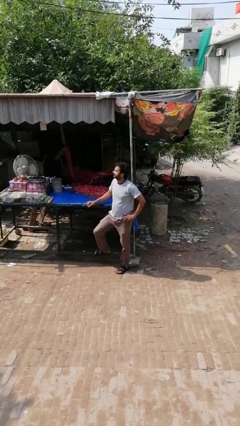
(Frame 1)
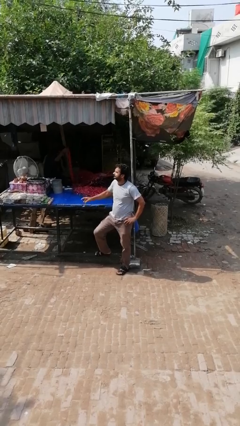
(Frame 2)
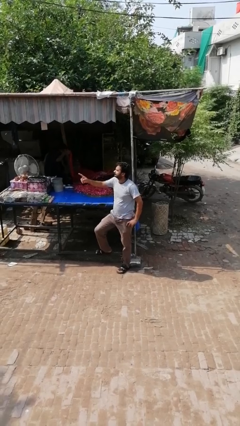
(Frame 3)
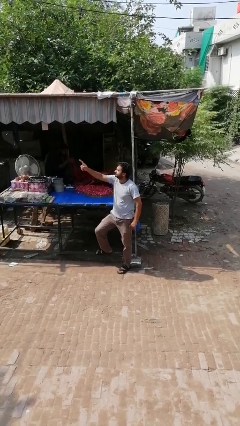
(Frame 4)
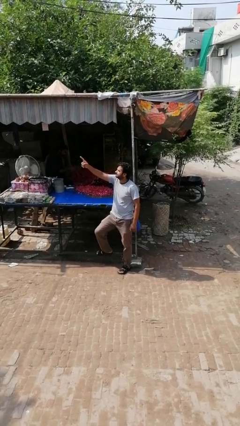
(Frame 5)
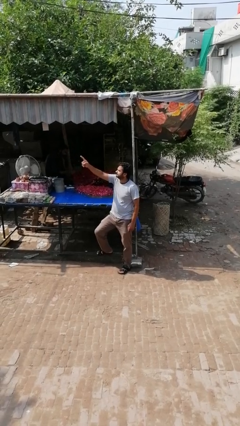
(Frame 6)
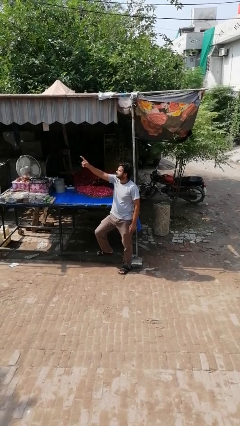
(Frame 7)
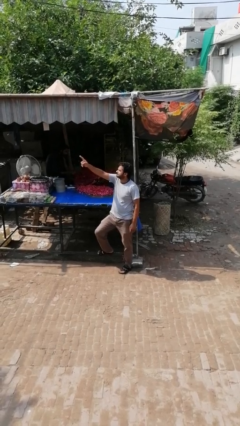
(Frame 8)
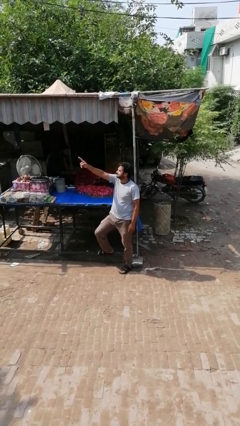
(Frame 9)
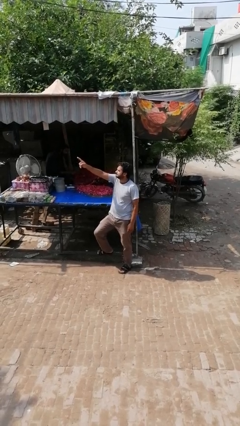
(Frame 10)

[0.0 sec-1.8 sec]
person points at person

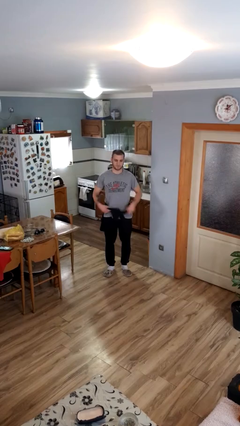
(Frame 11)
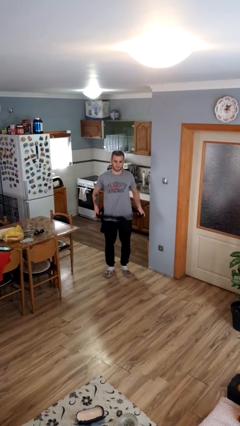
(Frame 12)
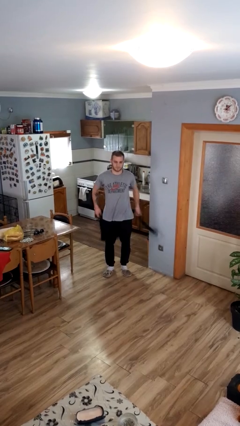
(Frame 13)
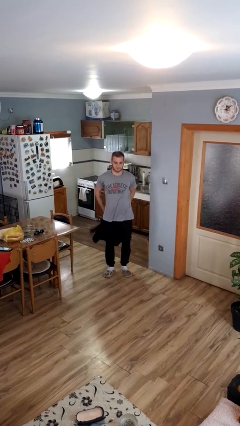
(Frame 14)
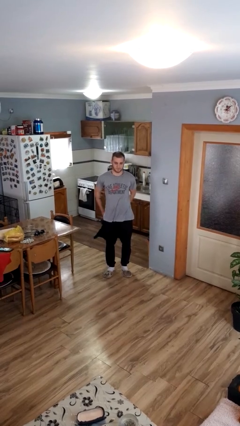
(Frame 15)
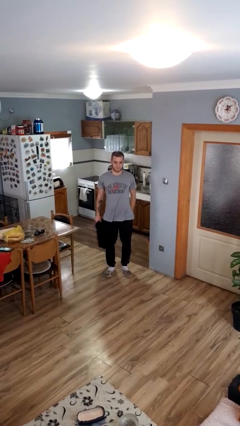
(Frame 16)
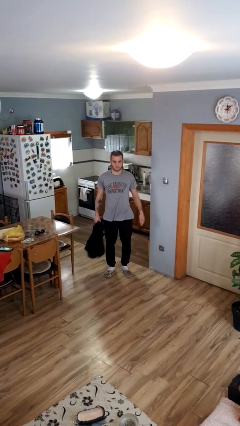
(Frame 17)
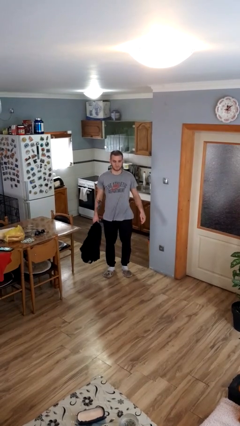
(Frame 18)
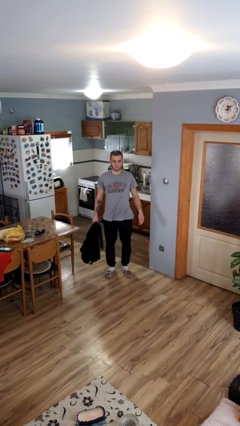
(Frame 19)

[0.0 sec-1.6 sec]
person unties jacket around waist

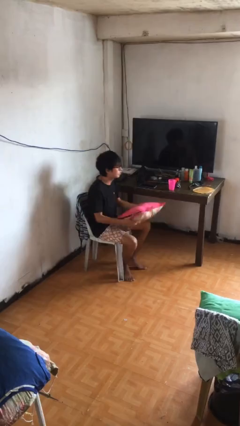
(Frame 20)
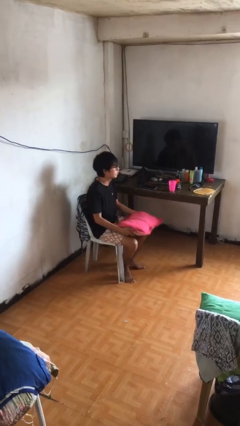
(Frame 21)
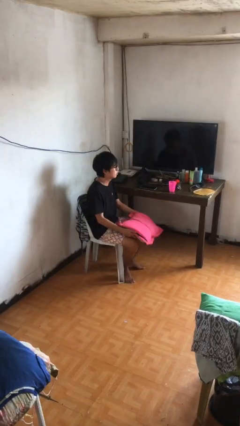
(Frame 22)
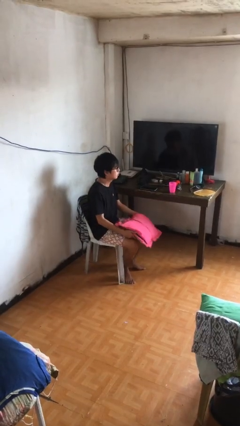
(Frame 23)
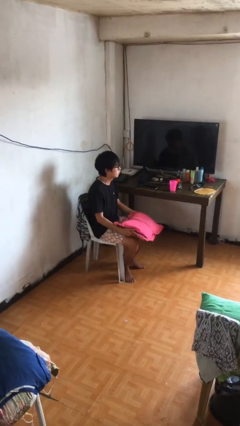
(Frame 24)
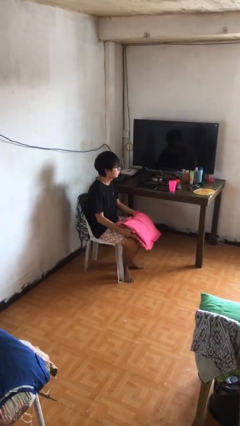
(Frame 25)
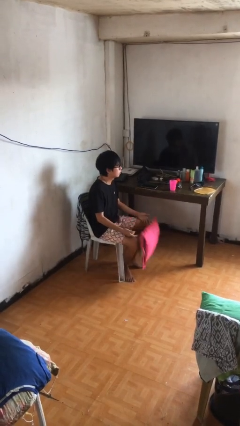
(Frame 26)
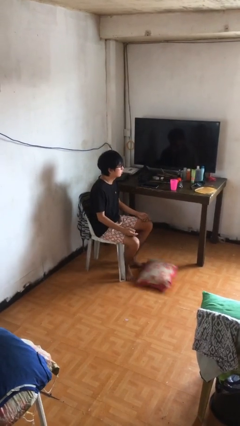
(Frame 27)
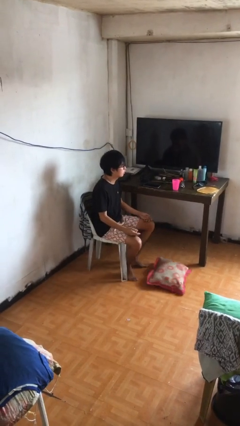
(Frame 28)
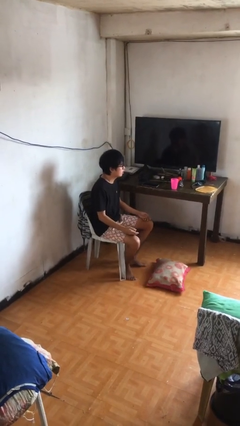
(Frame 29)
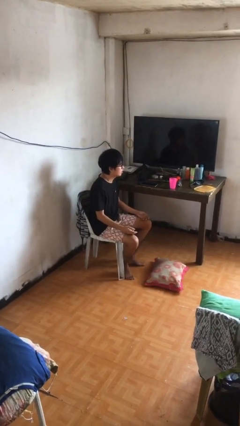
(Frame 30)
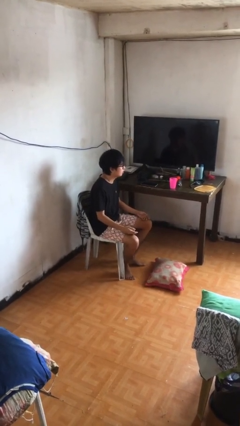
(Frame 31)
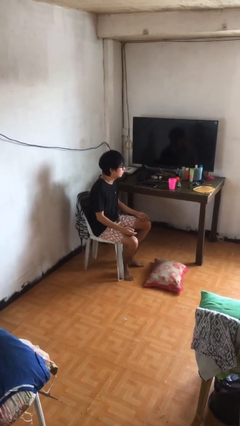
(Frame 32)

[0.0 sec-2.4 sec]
person drops object

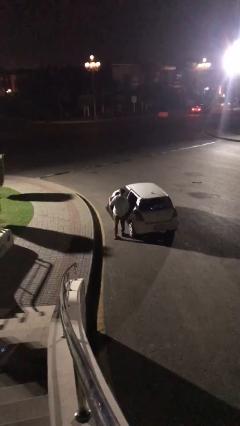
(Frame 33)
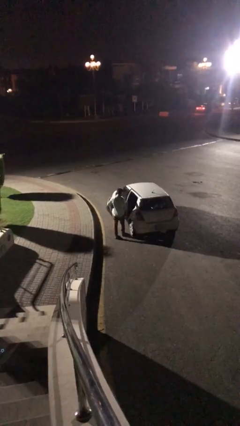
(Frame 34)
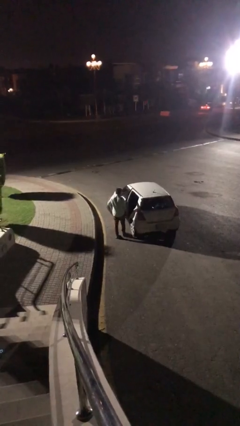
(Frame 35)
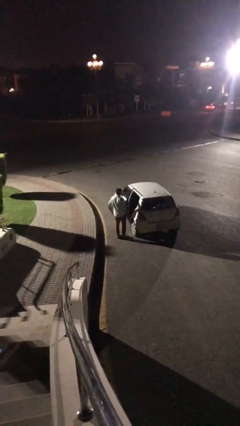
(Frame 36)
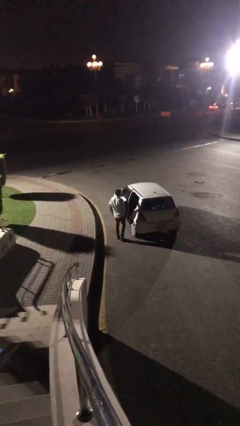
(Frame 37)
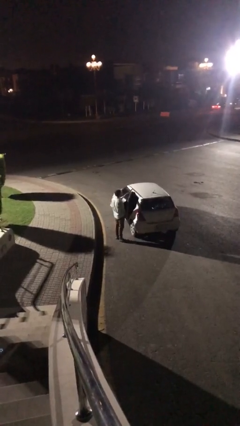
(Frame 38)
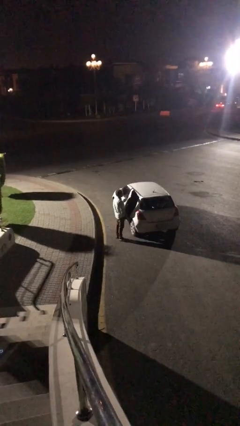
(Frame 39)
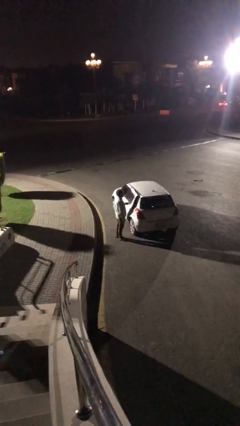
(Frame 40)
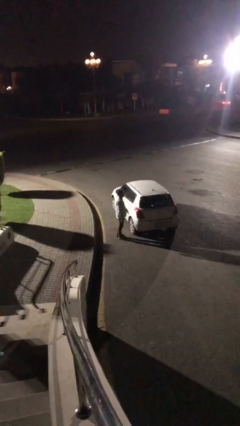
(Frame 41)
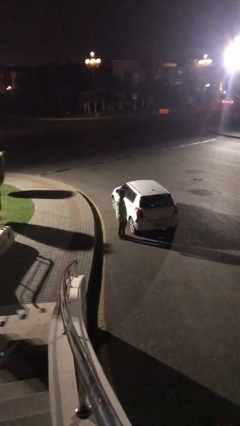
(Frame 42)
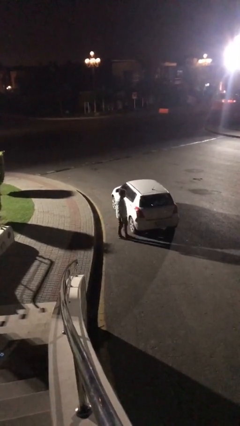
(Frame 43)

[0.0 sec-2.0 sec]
person closes car door

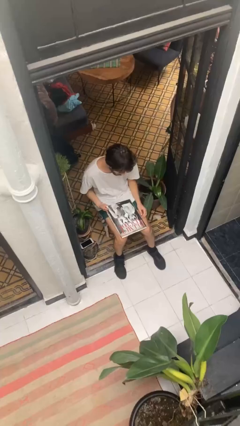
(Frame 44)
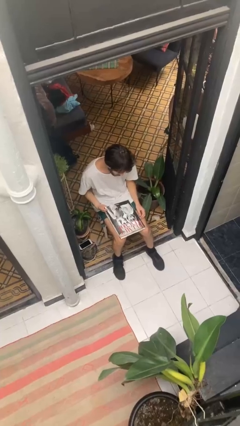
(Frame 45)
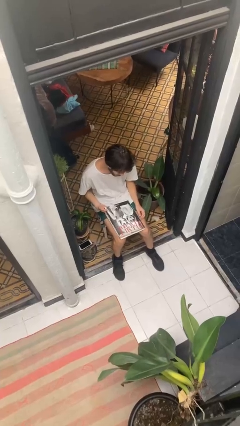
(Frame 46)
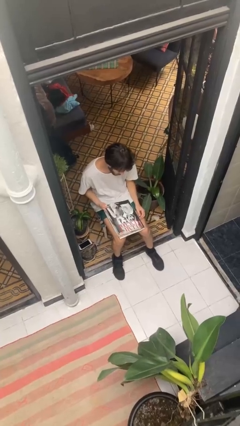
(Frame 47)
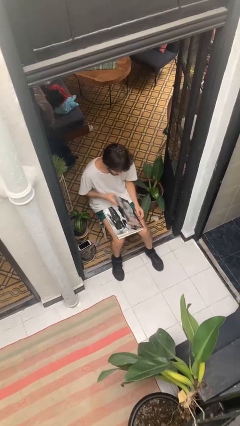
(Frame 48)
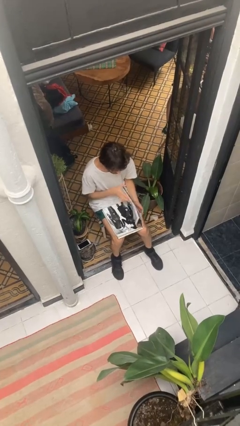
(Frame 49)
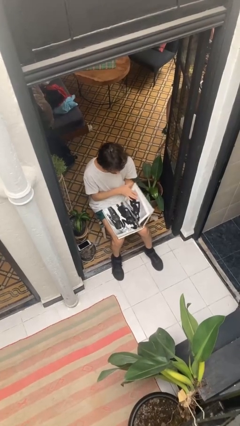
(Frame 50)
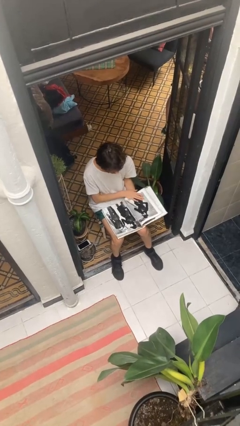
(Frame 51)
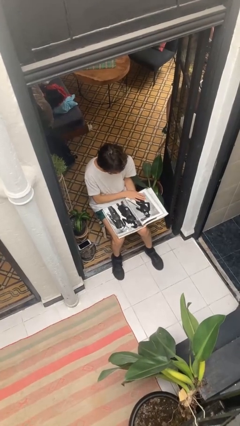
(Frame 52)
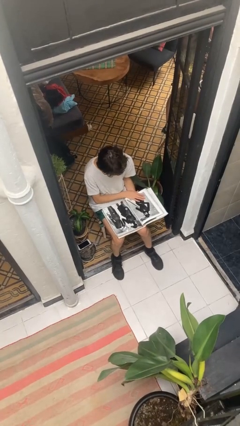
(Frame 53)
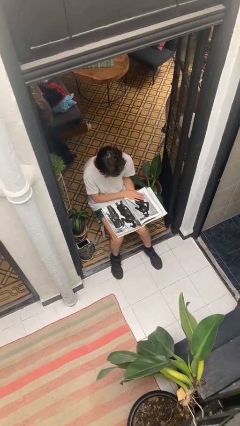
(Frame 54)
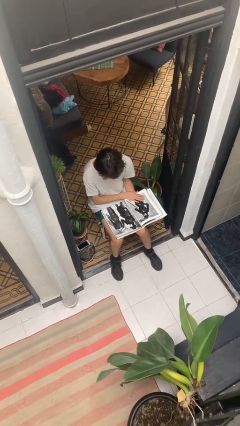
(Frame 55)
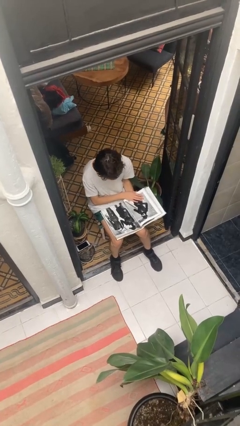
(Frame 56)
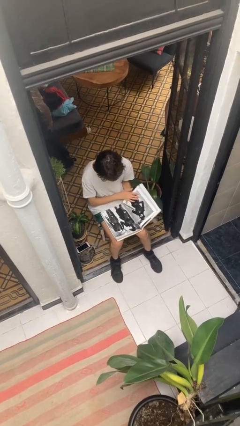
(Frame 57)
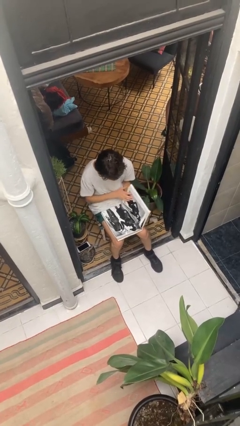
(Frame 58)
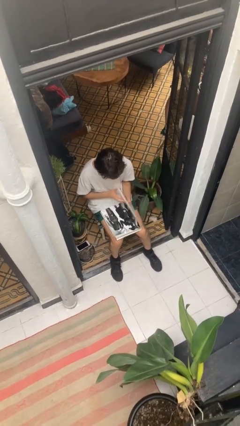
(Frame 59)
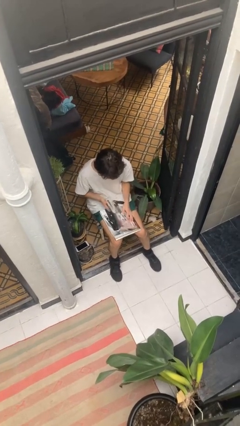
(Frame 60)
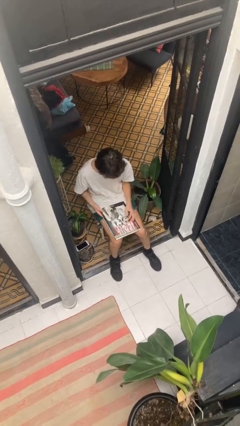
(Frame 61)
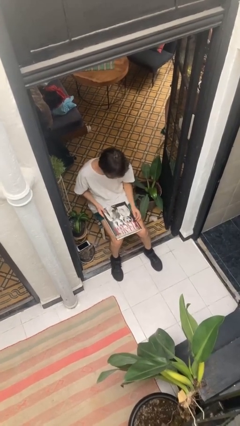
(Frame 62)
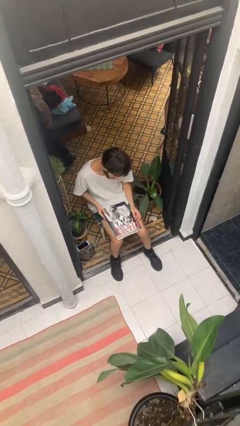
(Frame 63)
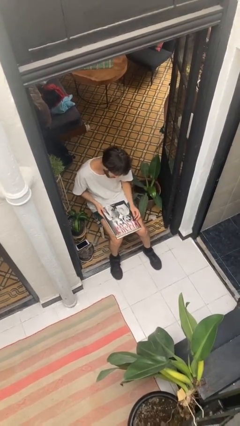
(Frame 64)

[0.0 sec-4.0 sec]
person reads document

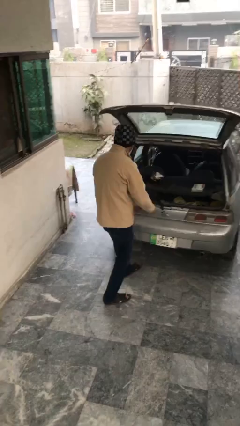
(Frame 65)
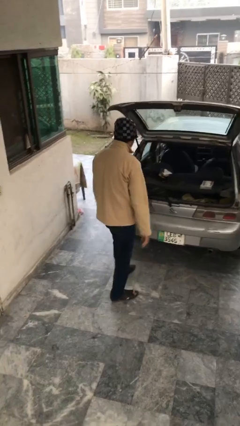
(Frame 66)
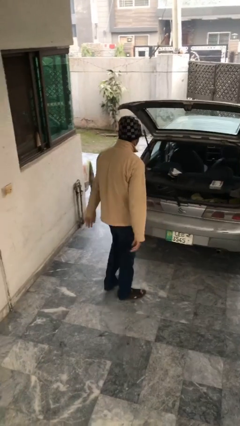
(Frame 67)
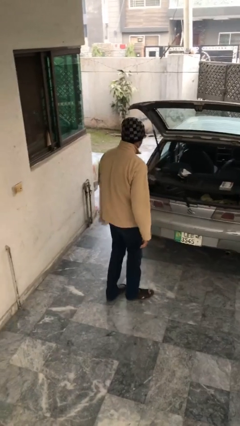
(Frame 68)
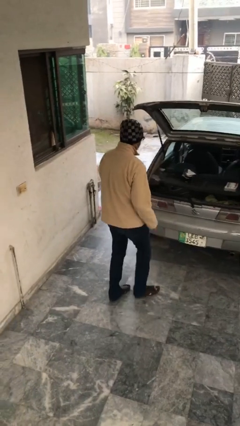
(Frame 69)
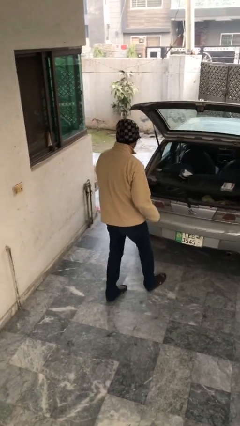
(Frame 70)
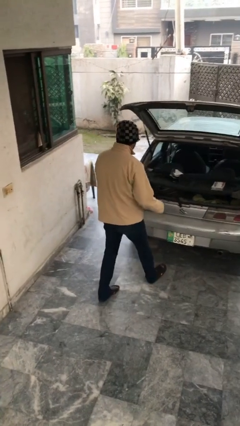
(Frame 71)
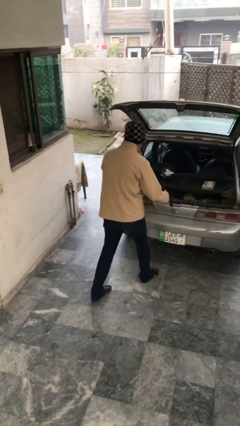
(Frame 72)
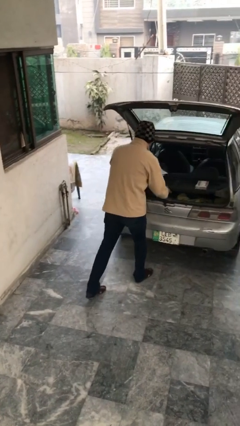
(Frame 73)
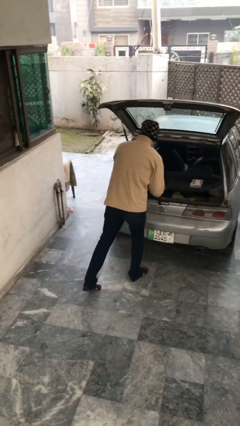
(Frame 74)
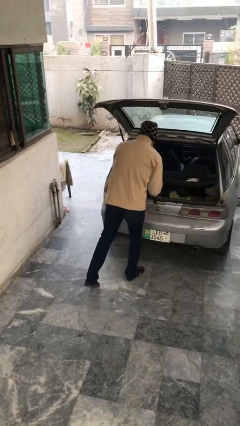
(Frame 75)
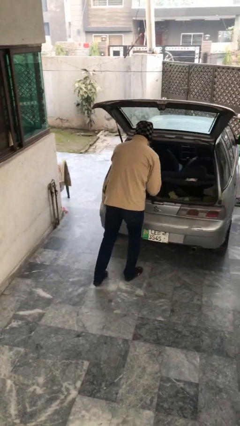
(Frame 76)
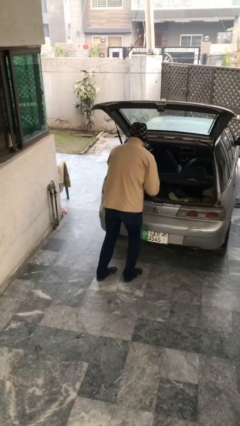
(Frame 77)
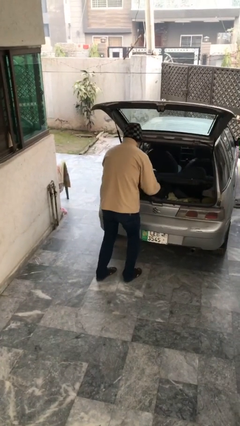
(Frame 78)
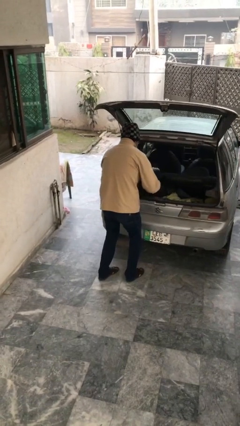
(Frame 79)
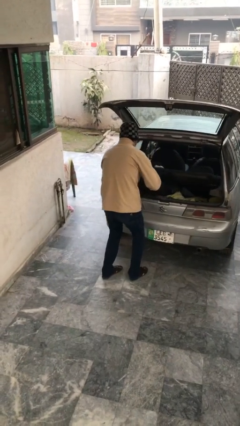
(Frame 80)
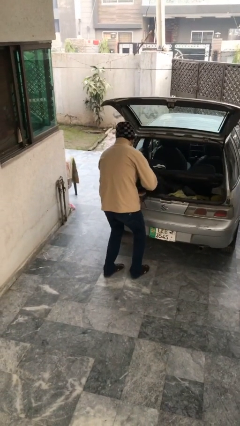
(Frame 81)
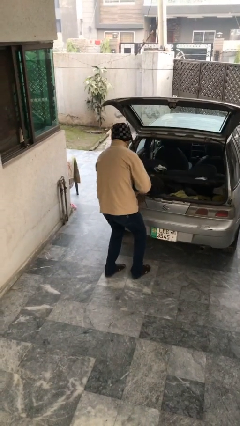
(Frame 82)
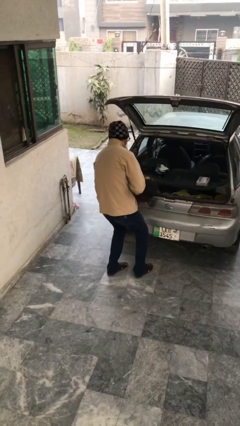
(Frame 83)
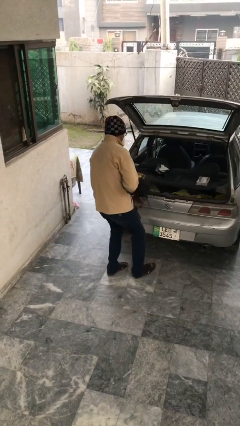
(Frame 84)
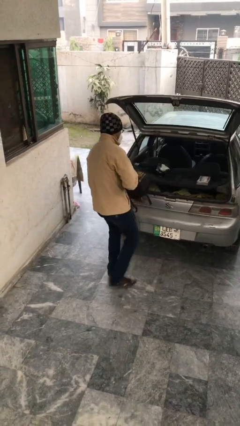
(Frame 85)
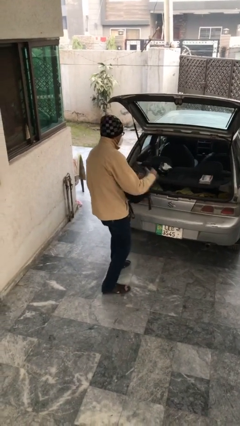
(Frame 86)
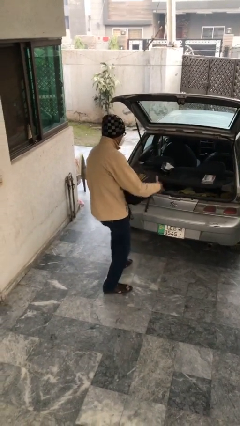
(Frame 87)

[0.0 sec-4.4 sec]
person unloads car

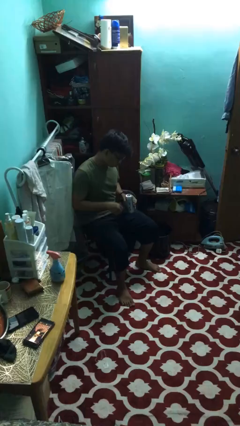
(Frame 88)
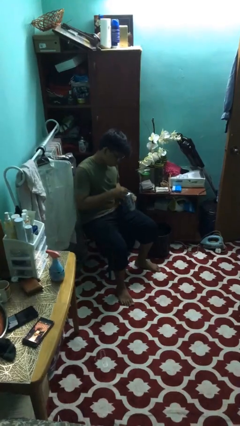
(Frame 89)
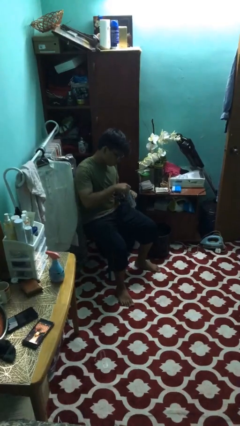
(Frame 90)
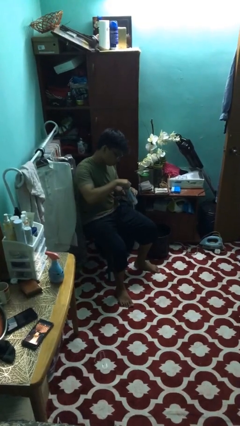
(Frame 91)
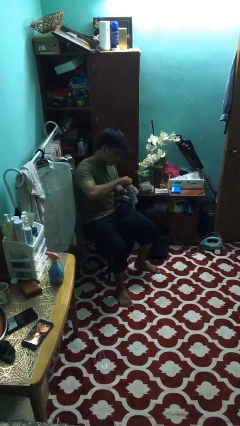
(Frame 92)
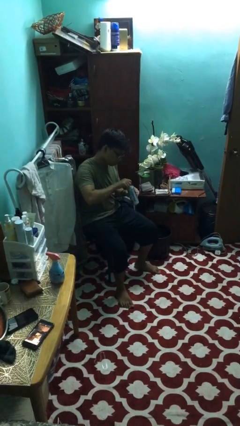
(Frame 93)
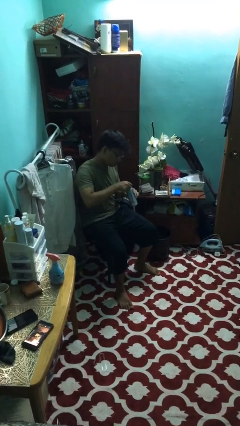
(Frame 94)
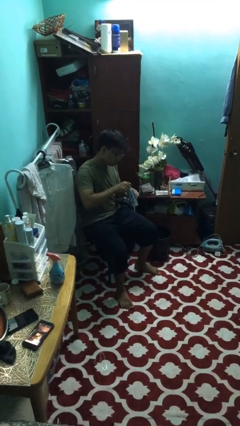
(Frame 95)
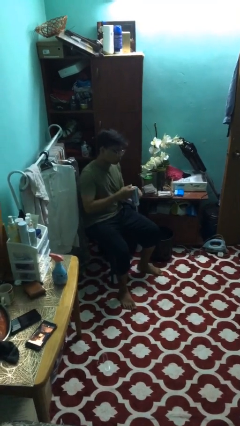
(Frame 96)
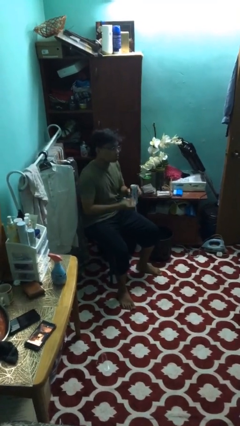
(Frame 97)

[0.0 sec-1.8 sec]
person opens beverage can
